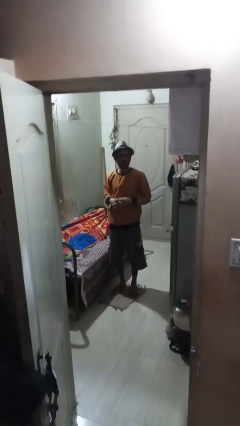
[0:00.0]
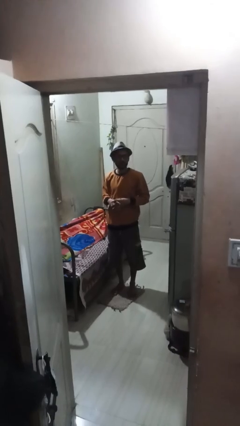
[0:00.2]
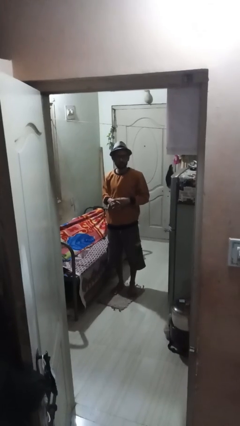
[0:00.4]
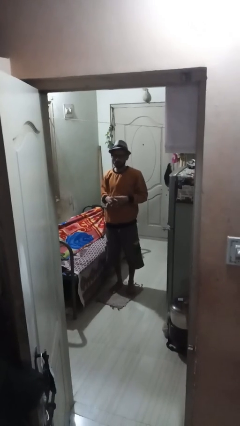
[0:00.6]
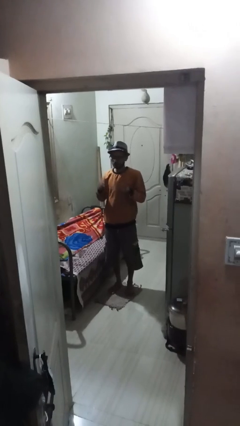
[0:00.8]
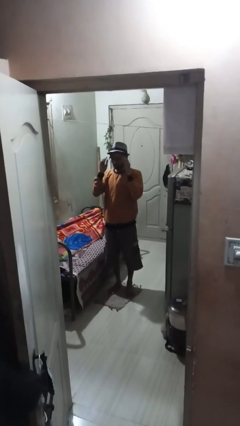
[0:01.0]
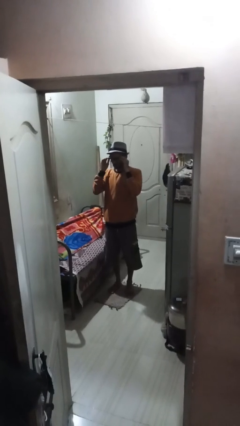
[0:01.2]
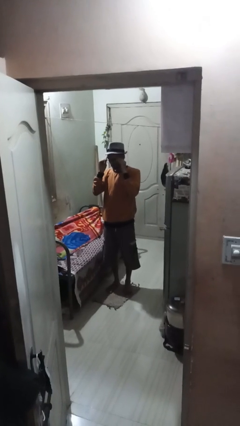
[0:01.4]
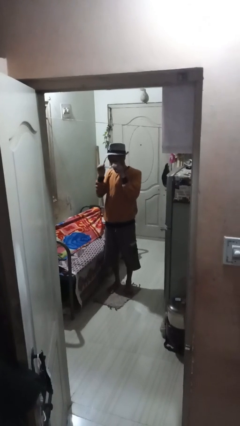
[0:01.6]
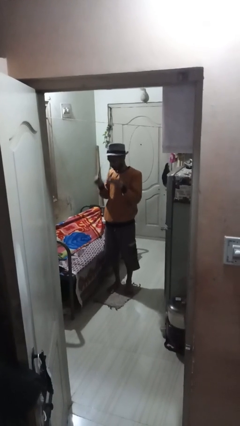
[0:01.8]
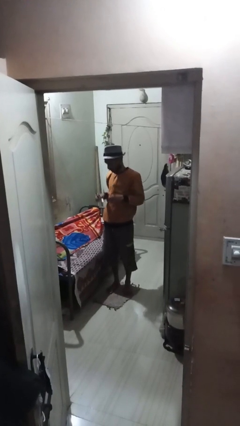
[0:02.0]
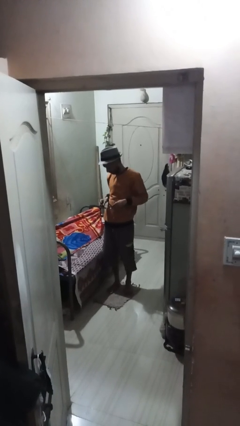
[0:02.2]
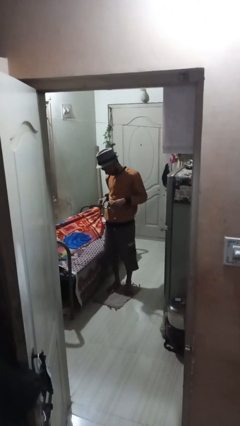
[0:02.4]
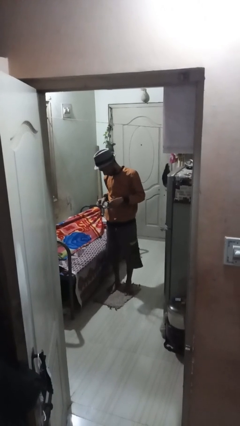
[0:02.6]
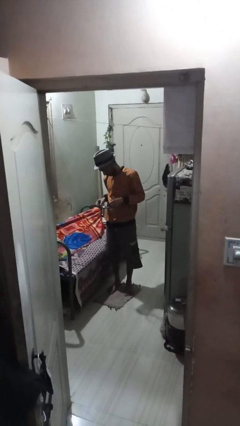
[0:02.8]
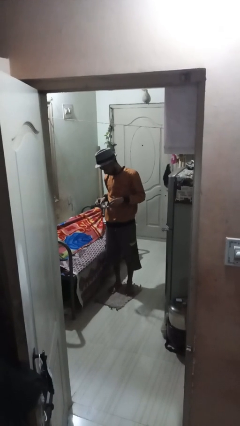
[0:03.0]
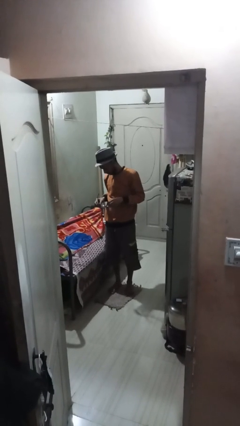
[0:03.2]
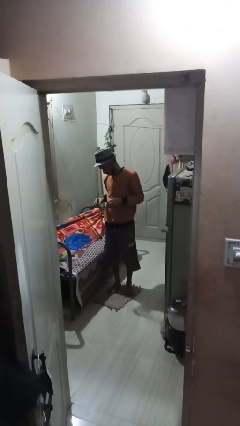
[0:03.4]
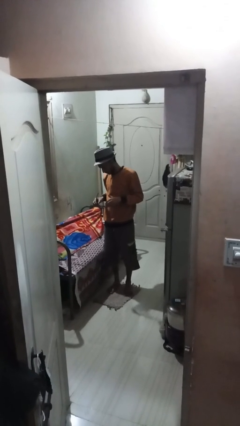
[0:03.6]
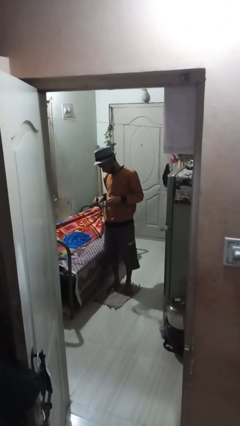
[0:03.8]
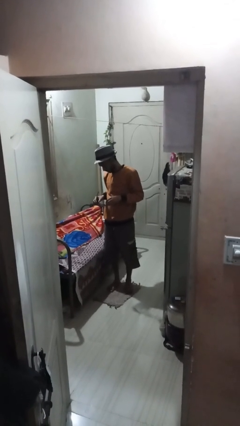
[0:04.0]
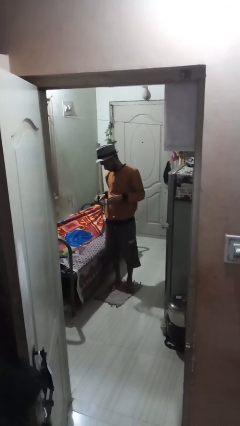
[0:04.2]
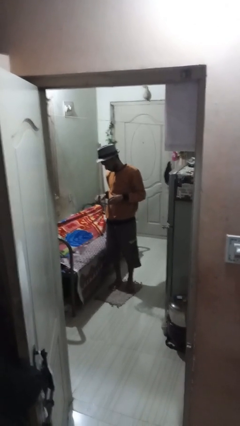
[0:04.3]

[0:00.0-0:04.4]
person takes off glasses

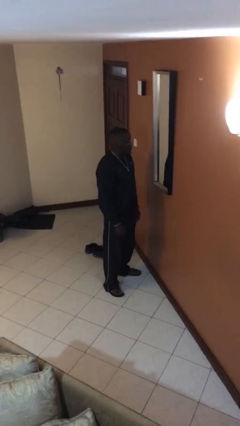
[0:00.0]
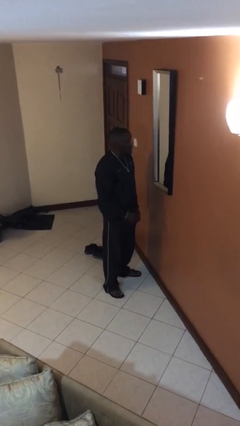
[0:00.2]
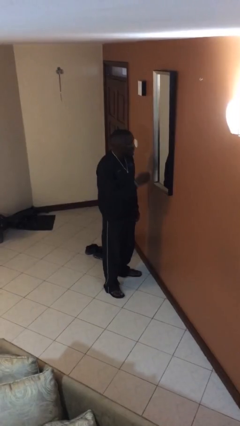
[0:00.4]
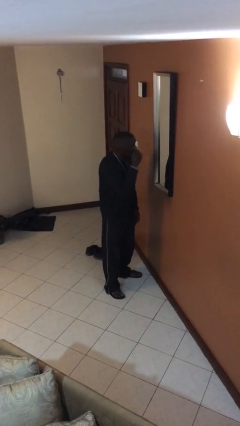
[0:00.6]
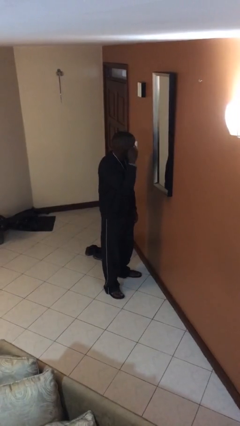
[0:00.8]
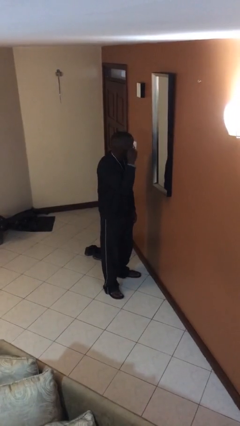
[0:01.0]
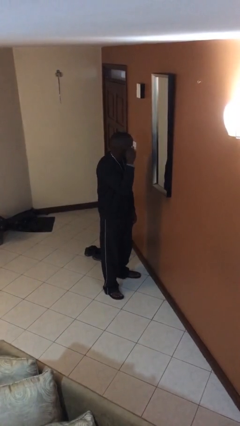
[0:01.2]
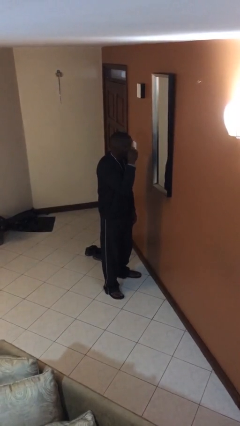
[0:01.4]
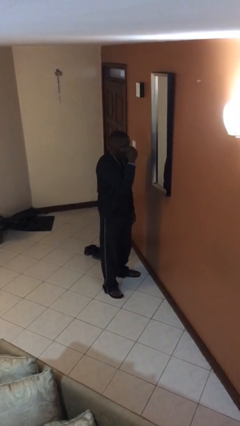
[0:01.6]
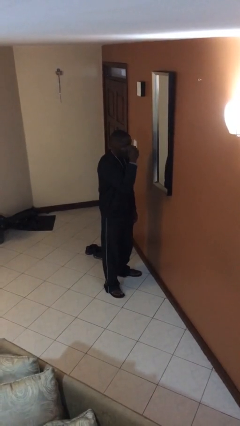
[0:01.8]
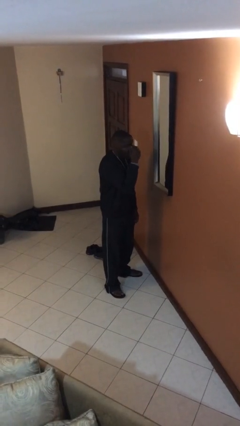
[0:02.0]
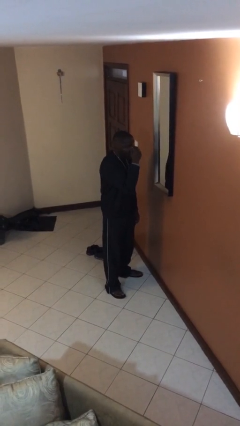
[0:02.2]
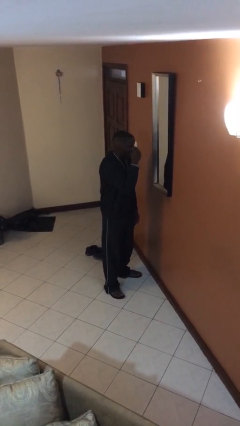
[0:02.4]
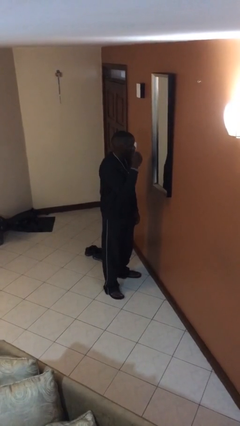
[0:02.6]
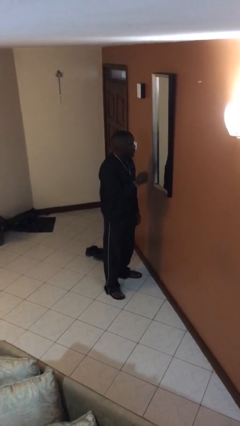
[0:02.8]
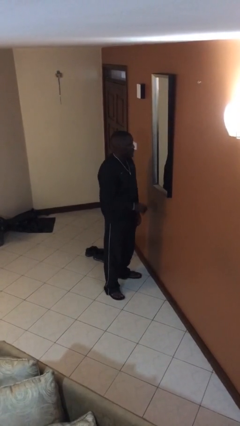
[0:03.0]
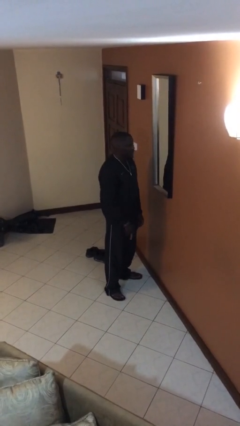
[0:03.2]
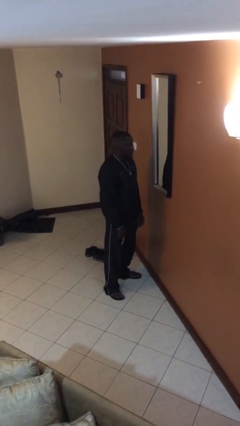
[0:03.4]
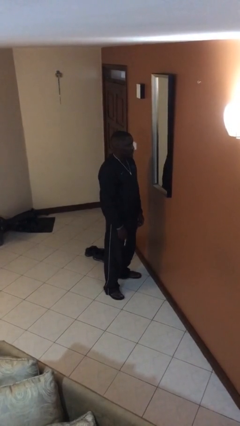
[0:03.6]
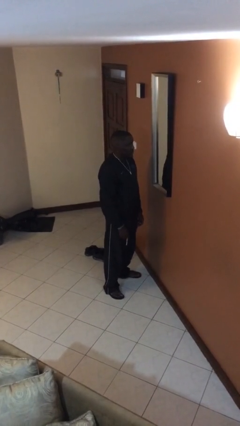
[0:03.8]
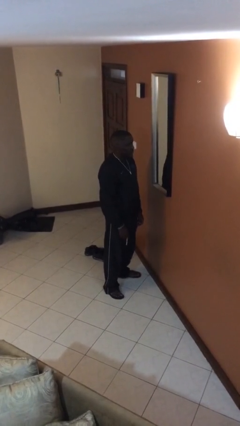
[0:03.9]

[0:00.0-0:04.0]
person applies eye makeup

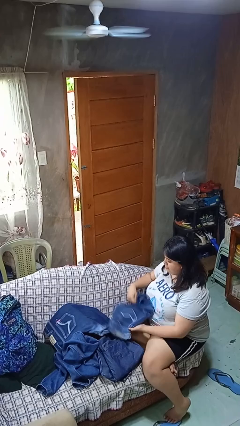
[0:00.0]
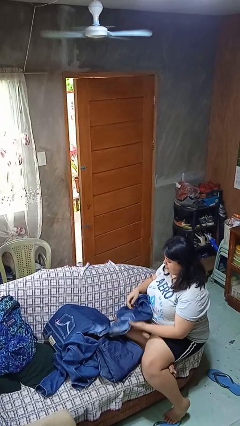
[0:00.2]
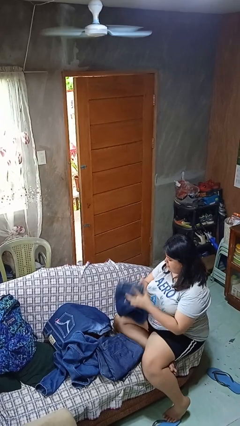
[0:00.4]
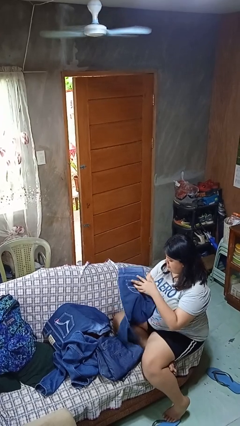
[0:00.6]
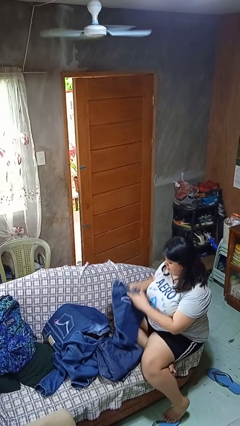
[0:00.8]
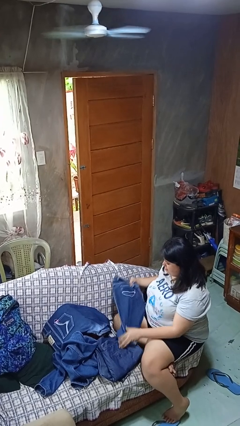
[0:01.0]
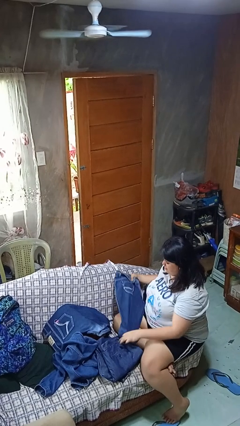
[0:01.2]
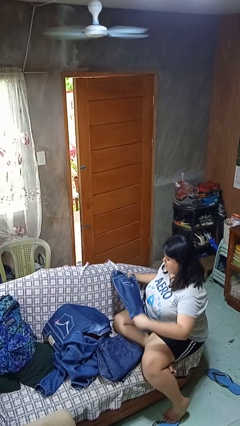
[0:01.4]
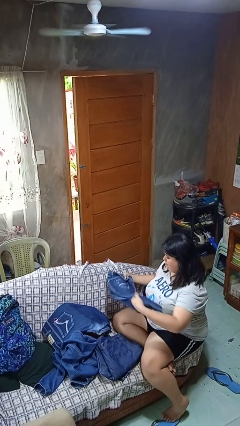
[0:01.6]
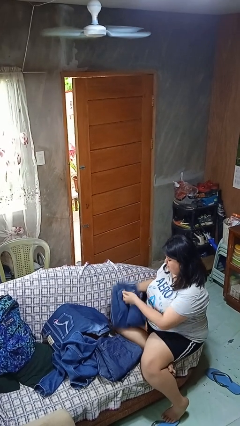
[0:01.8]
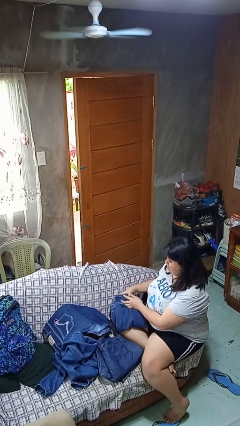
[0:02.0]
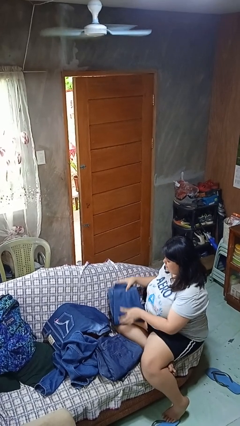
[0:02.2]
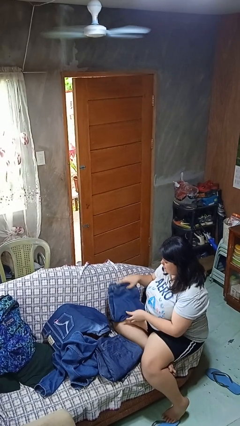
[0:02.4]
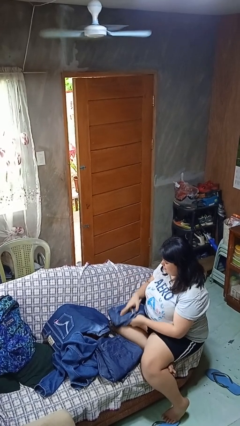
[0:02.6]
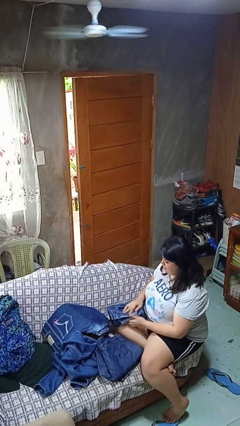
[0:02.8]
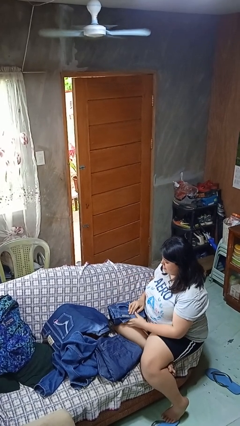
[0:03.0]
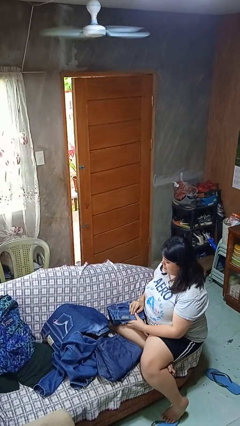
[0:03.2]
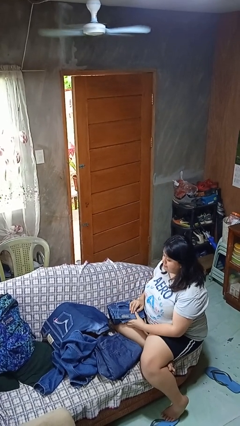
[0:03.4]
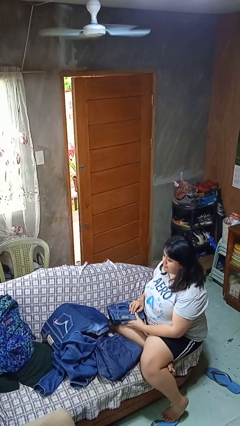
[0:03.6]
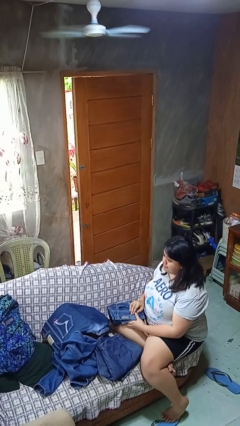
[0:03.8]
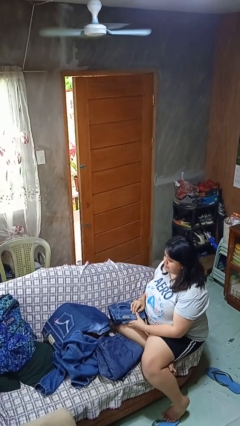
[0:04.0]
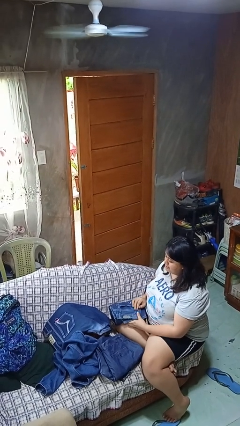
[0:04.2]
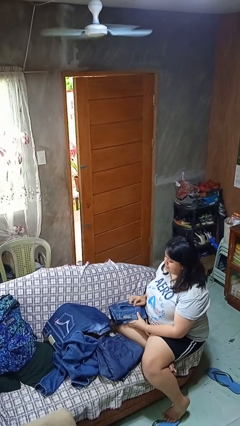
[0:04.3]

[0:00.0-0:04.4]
person folds pants

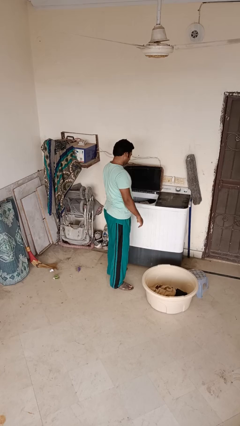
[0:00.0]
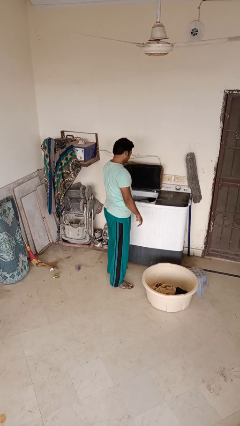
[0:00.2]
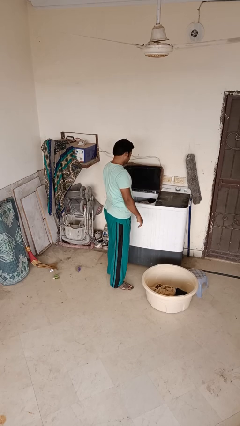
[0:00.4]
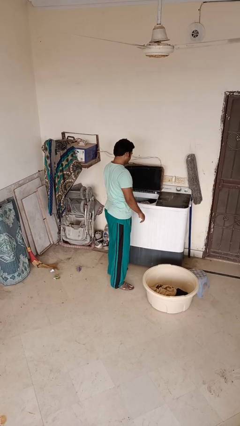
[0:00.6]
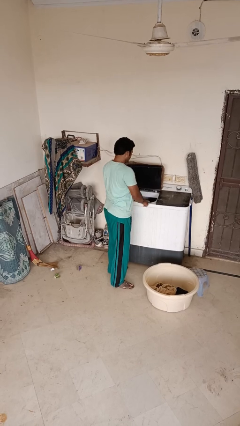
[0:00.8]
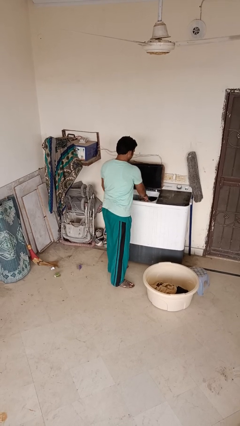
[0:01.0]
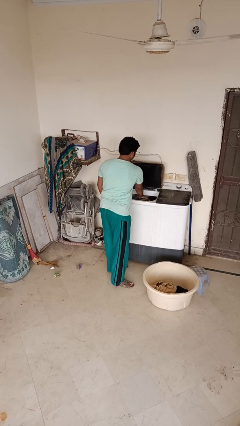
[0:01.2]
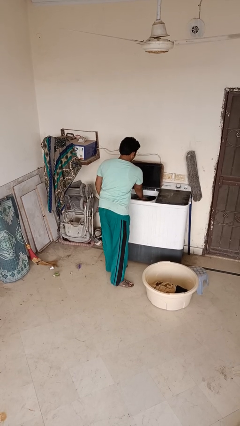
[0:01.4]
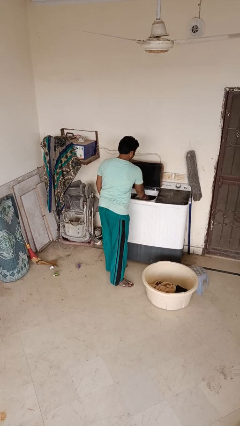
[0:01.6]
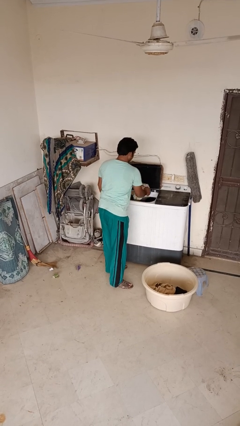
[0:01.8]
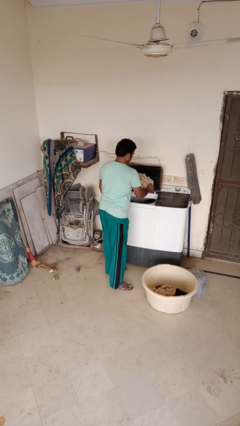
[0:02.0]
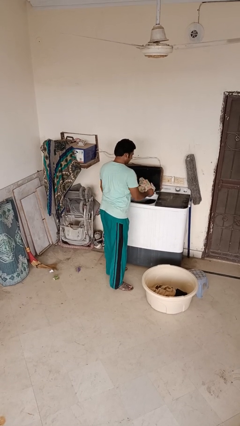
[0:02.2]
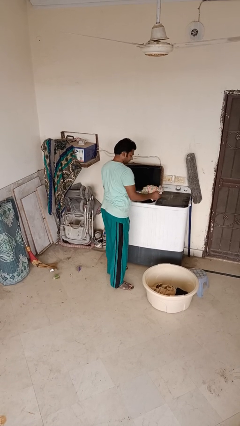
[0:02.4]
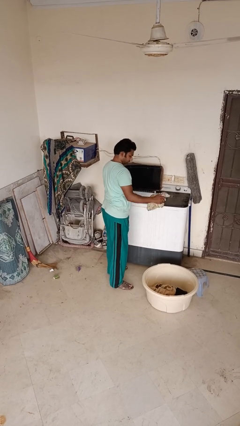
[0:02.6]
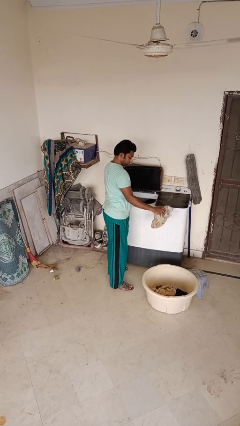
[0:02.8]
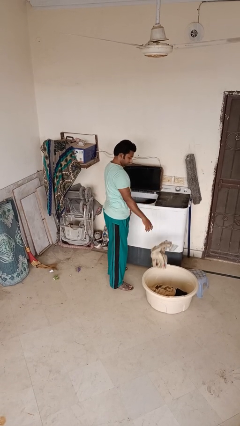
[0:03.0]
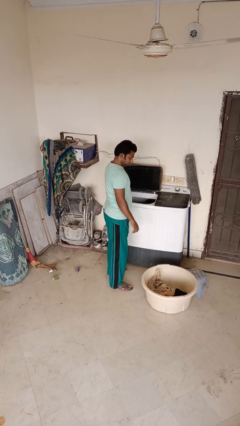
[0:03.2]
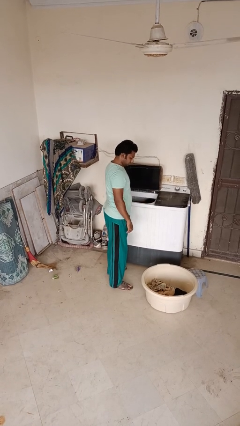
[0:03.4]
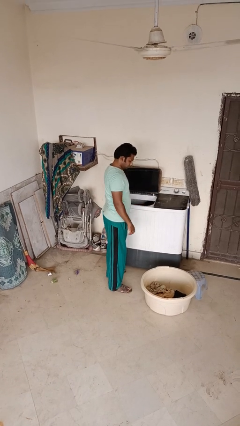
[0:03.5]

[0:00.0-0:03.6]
person loads clotheswasher

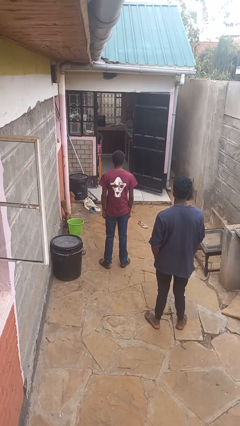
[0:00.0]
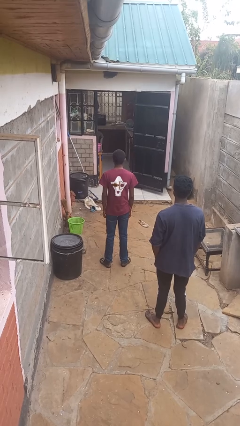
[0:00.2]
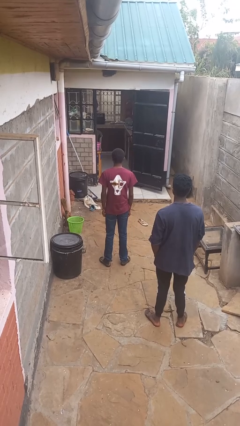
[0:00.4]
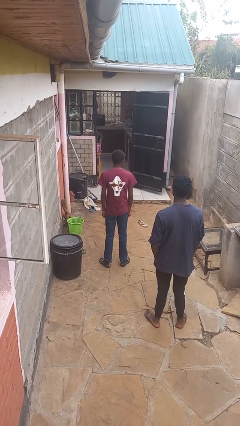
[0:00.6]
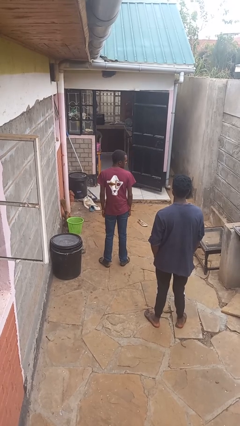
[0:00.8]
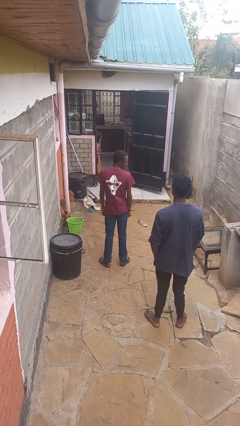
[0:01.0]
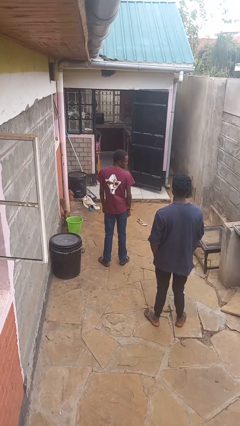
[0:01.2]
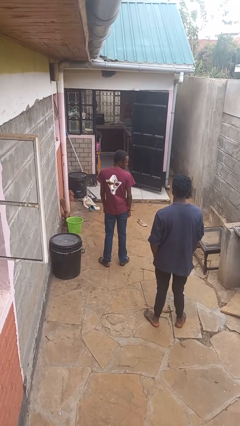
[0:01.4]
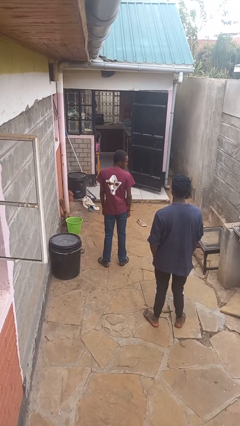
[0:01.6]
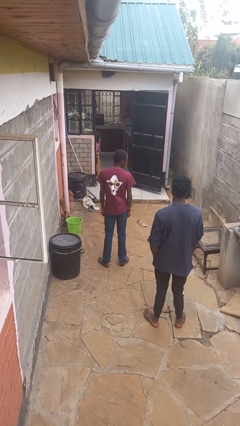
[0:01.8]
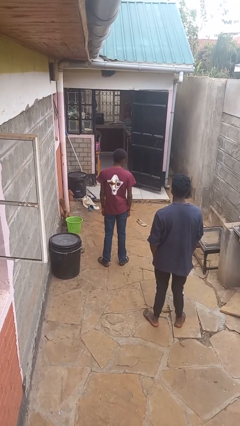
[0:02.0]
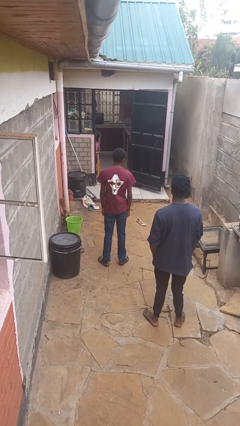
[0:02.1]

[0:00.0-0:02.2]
person looks over shoulder
